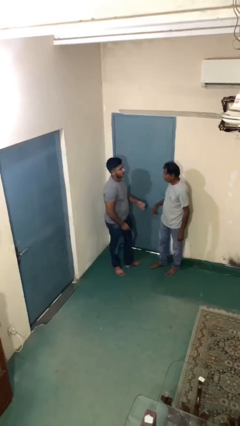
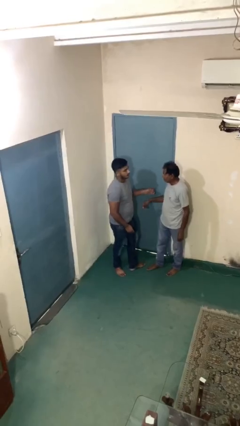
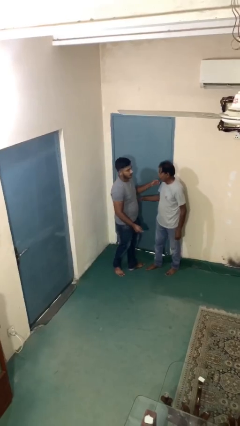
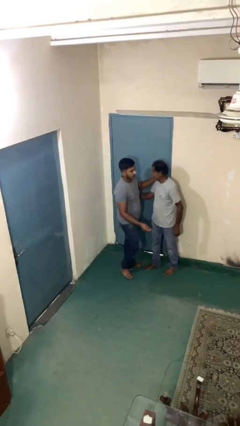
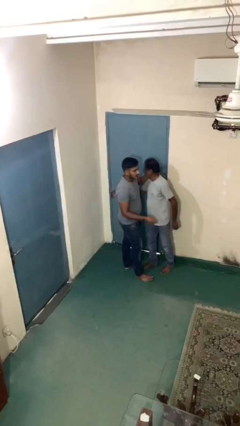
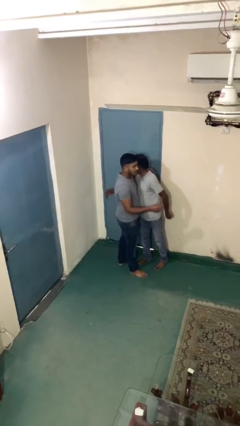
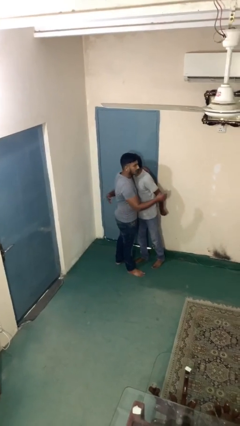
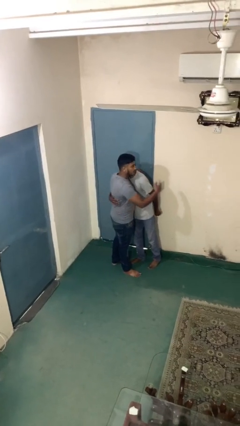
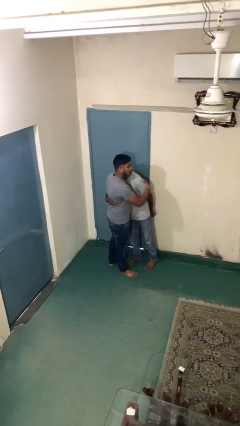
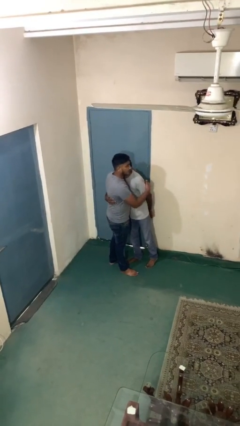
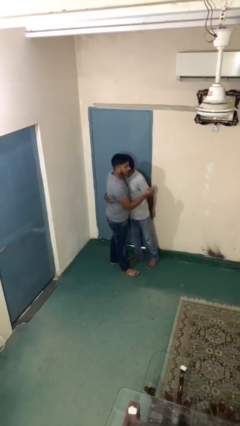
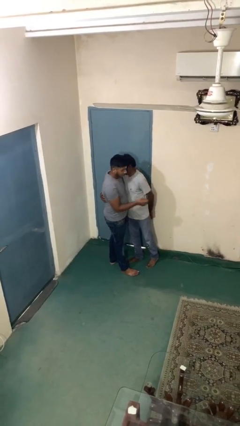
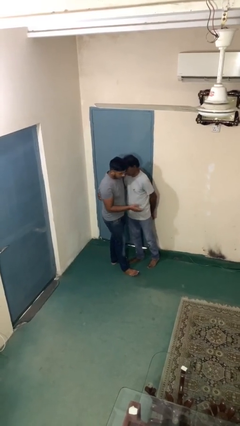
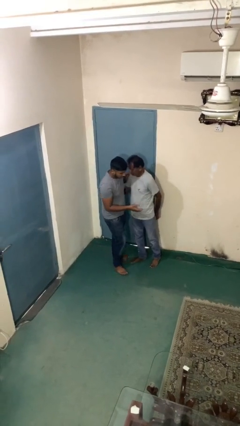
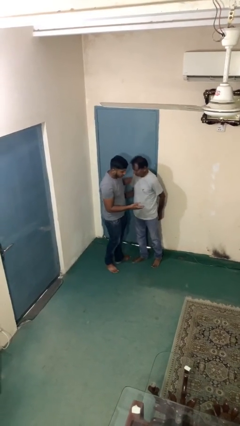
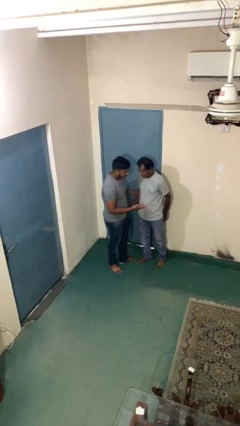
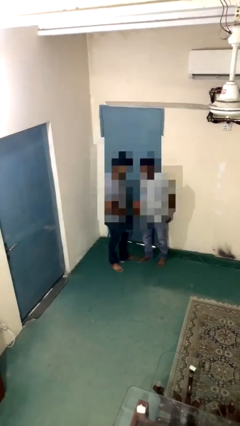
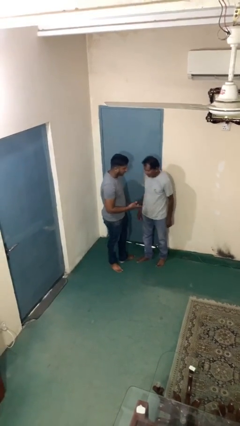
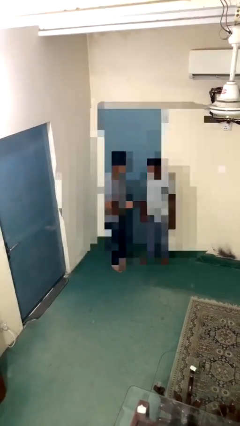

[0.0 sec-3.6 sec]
person embraces person

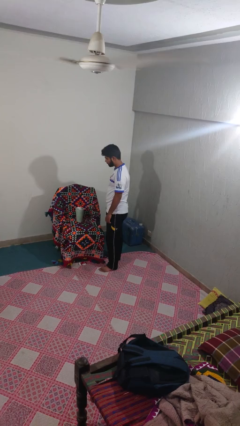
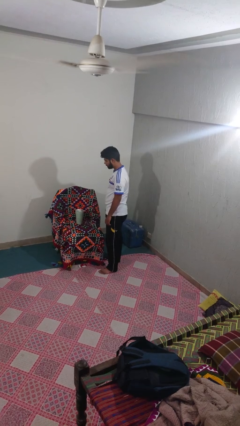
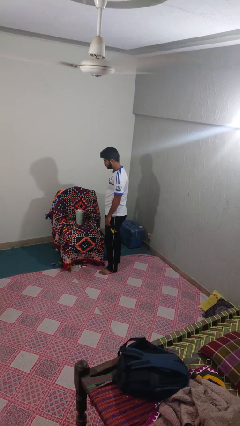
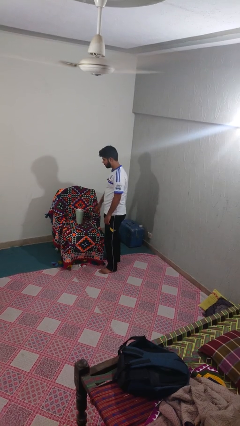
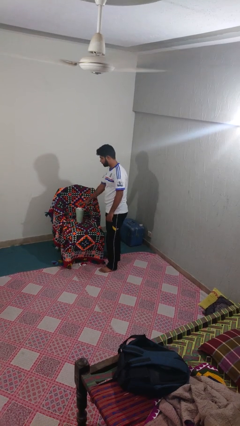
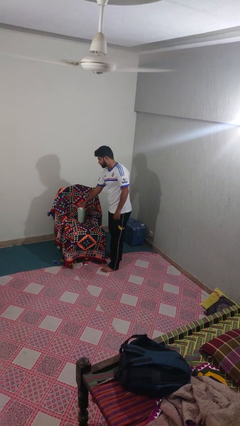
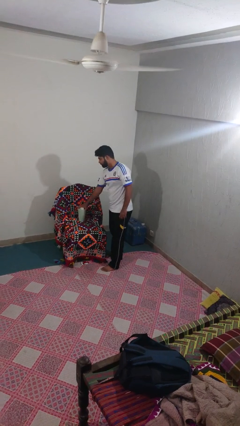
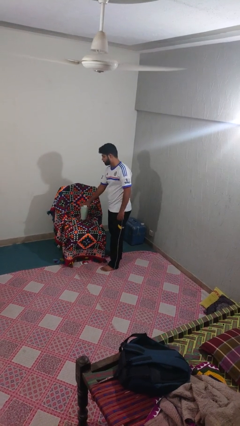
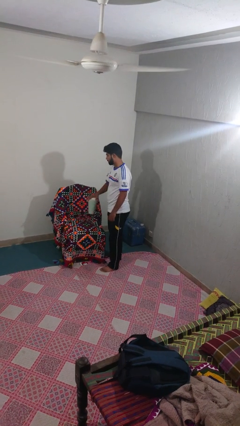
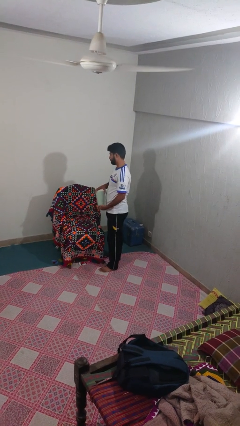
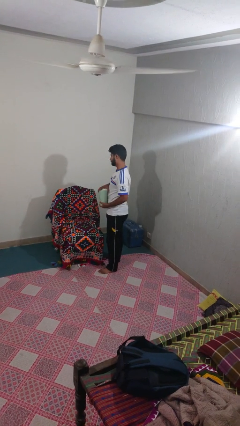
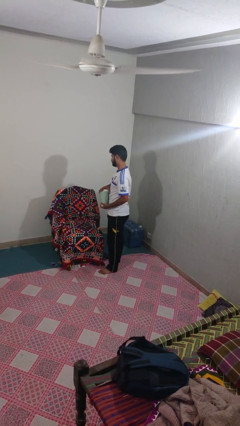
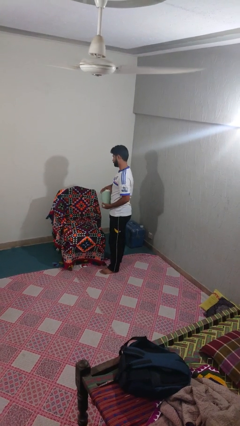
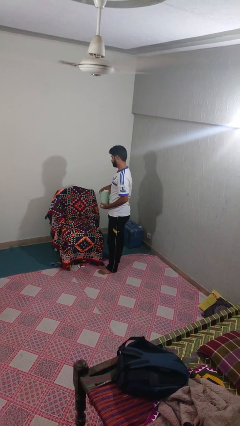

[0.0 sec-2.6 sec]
person picks up object from couch

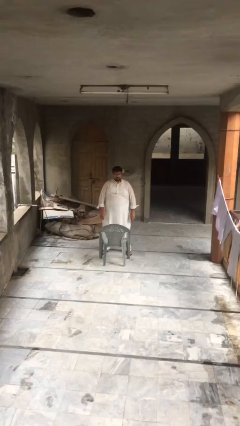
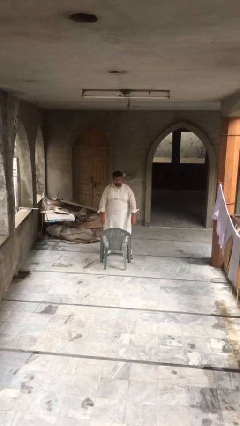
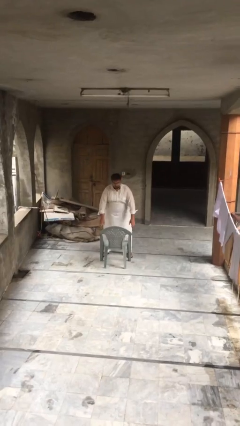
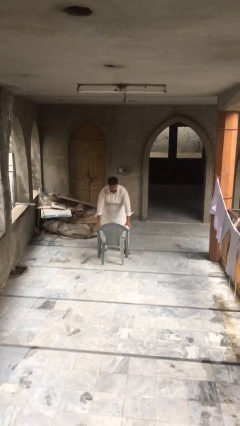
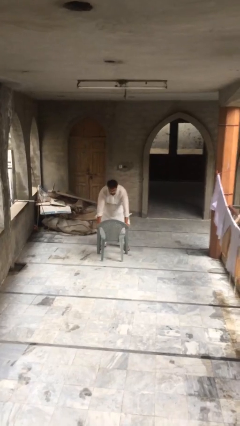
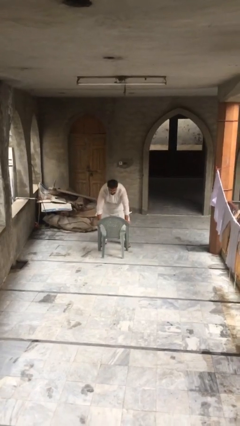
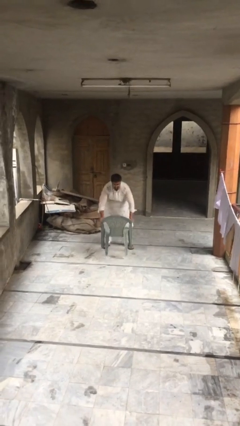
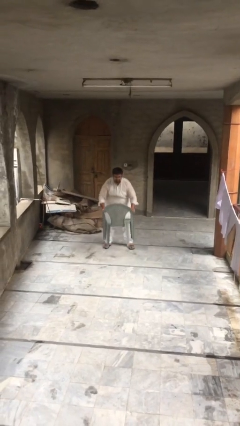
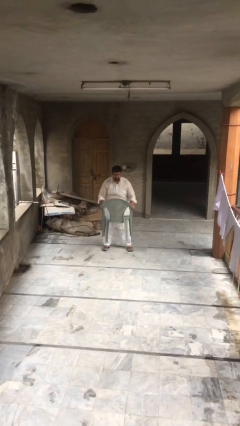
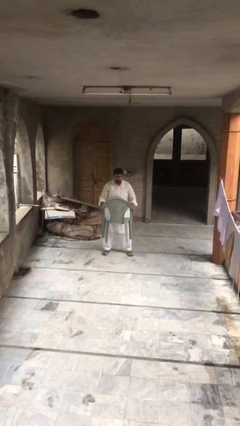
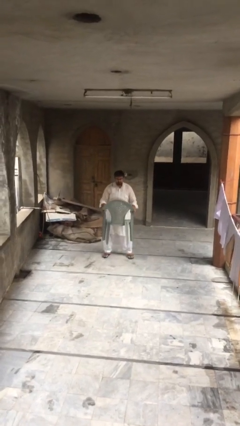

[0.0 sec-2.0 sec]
person picks up object from floor

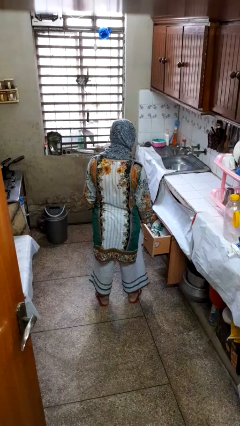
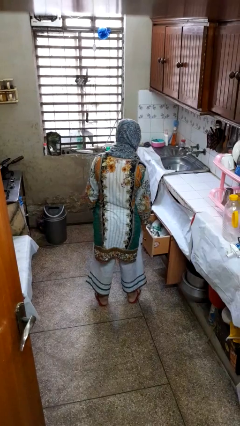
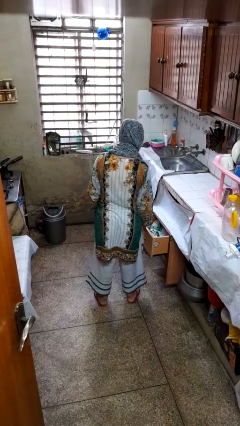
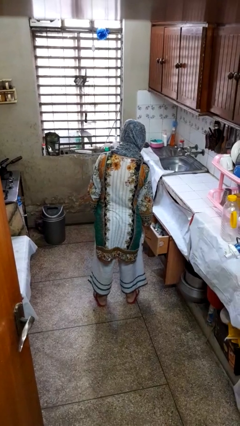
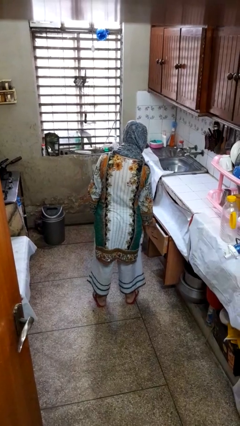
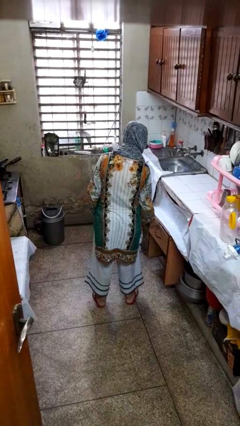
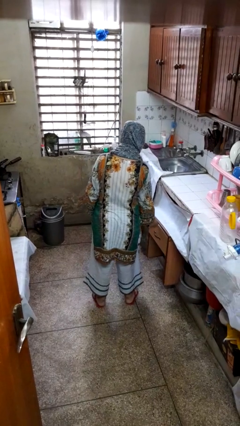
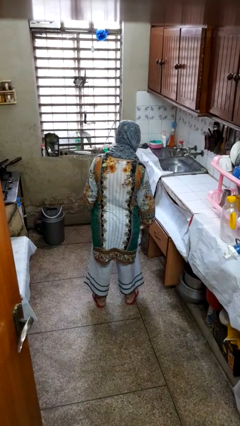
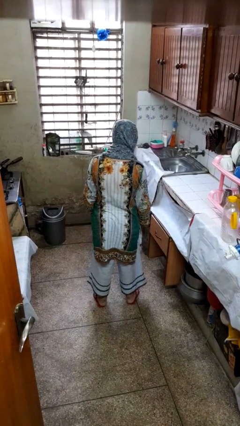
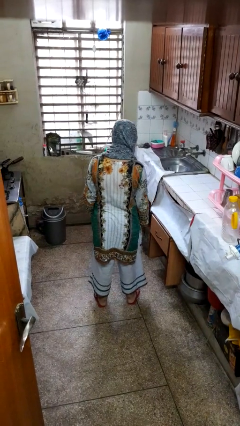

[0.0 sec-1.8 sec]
person closes kitchen drawer

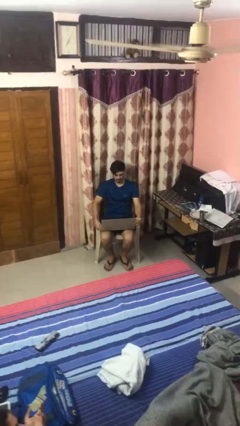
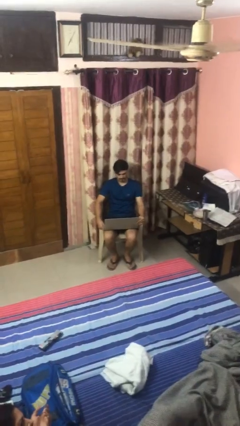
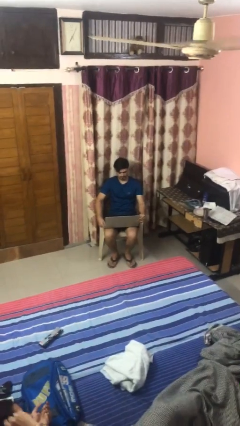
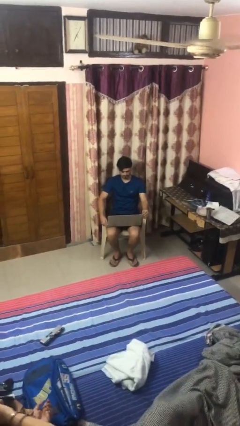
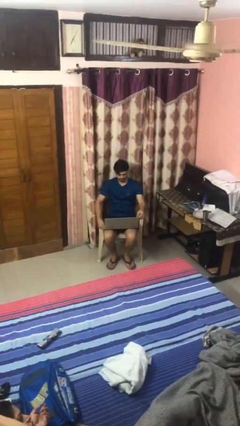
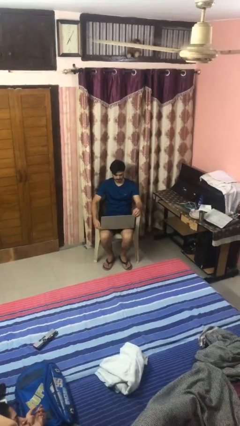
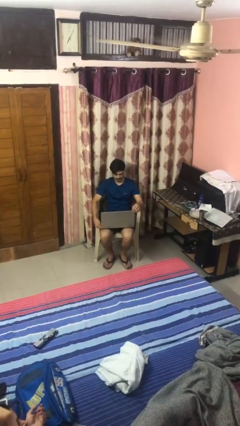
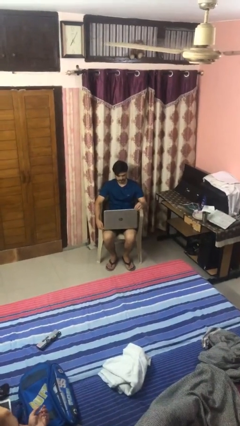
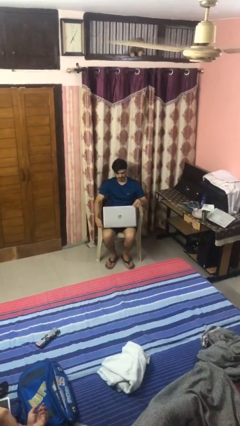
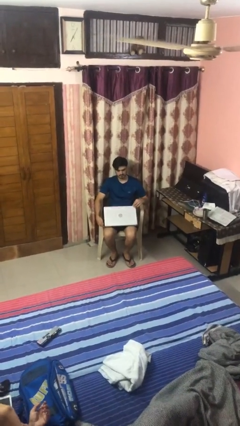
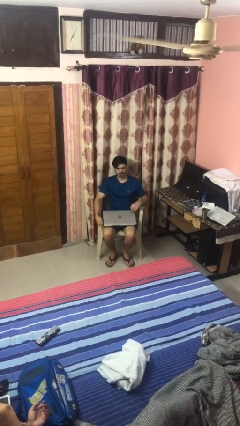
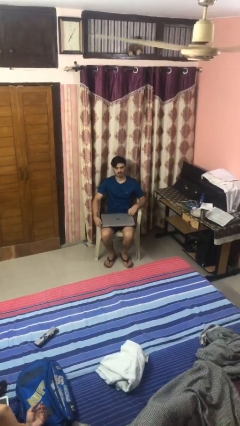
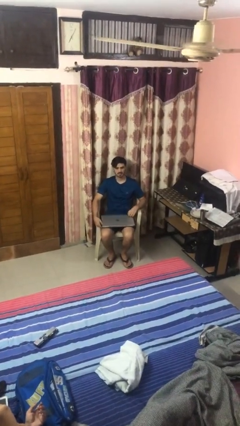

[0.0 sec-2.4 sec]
person closes laptop

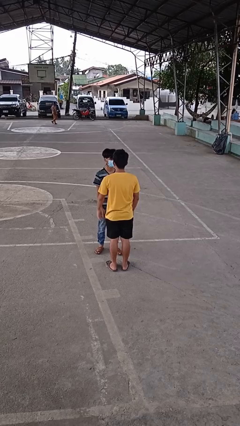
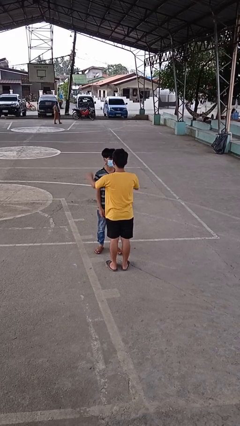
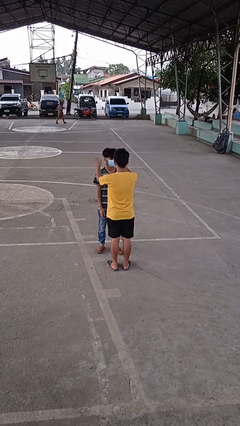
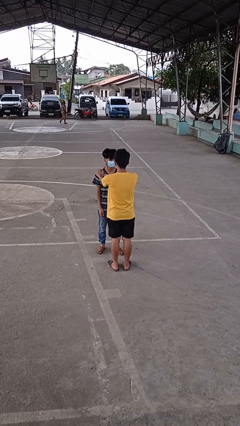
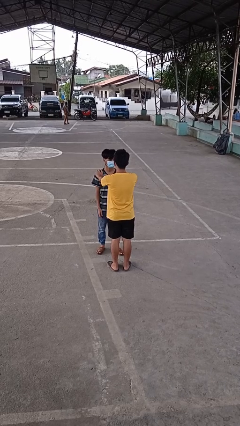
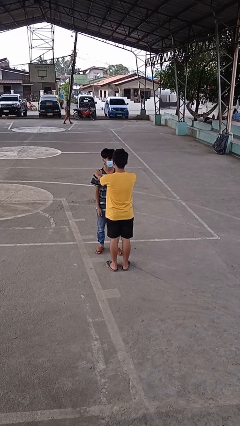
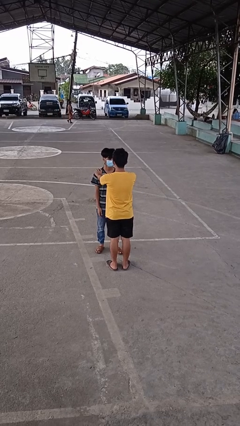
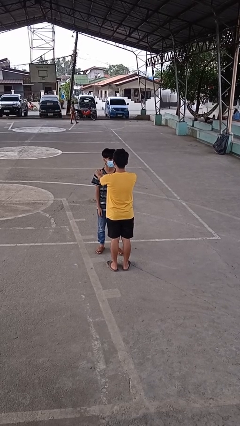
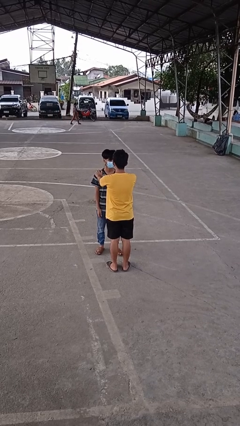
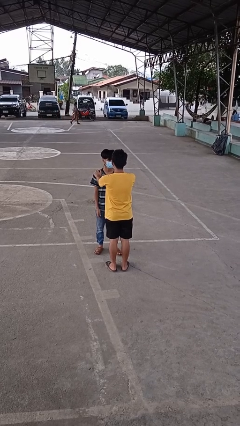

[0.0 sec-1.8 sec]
person grabs person by shoulder

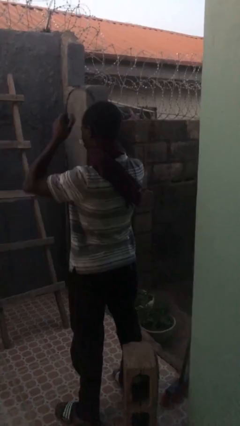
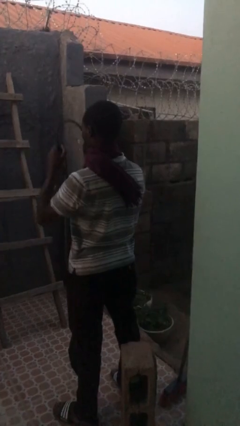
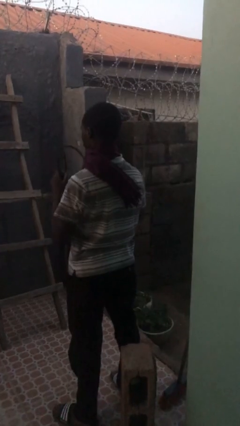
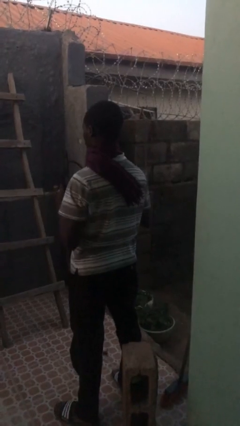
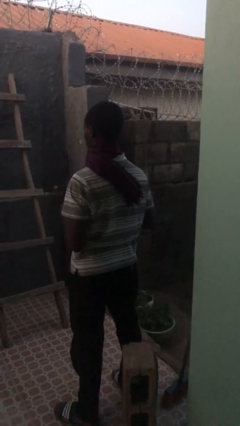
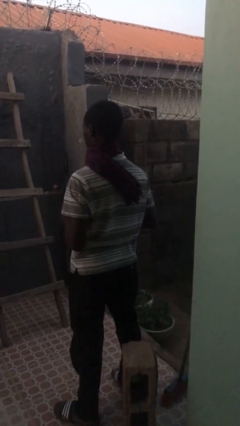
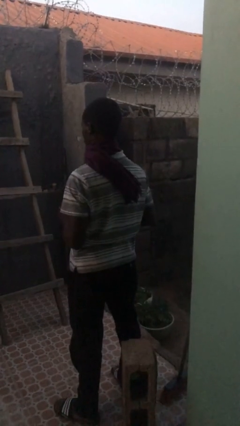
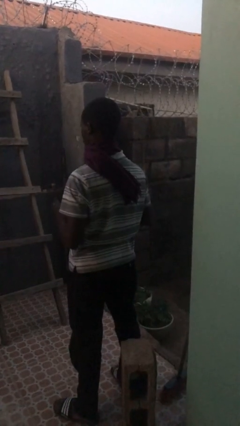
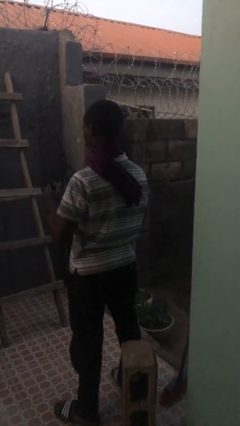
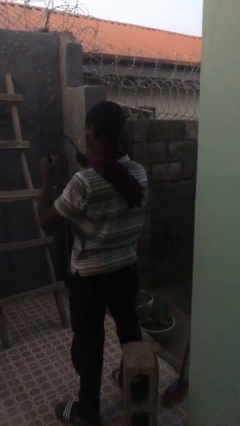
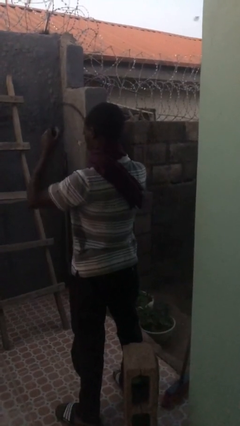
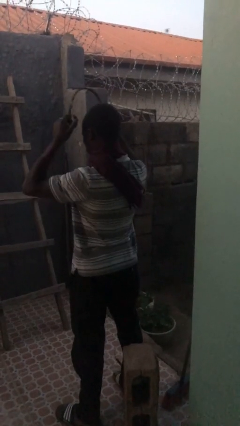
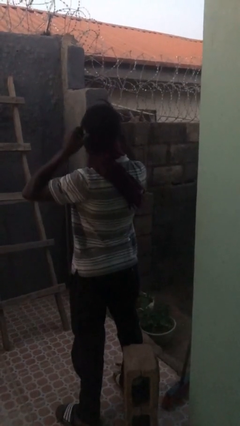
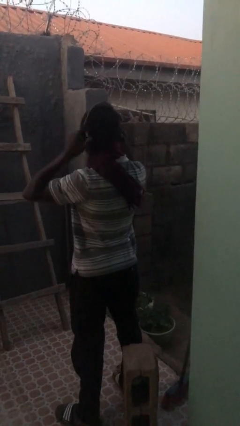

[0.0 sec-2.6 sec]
person takes off headphones
